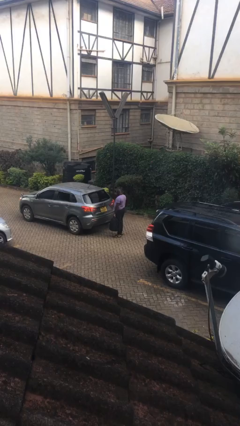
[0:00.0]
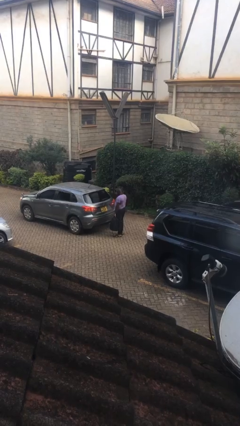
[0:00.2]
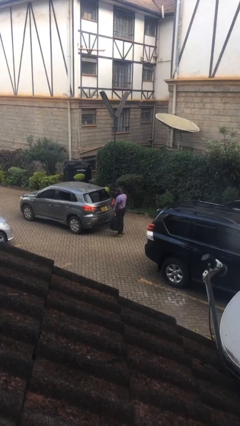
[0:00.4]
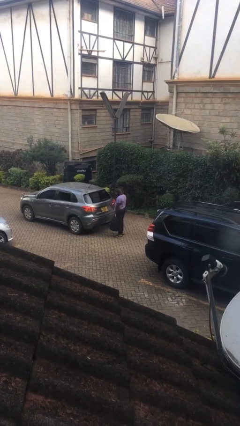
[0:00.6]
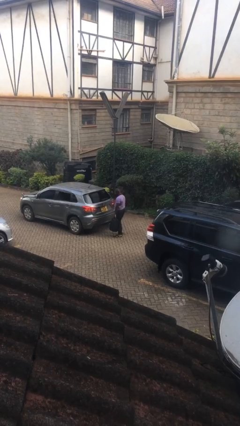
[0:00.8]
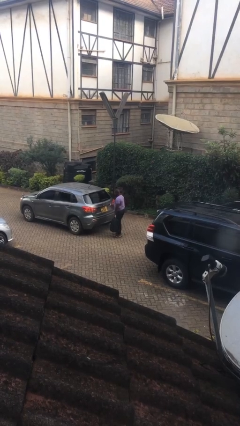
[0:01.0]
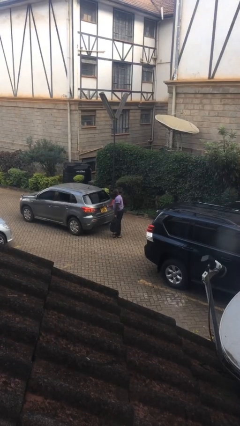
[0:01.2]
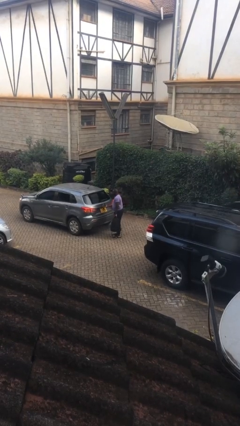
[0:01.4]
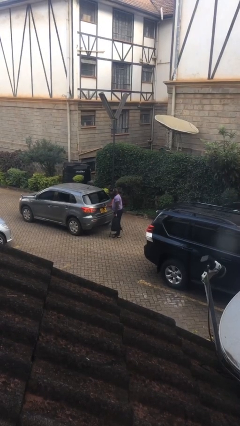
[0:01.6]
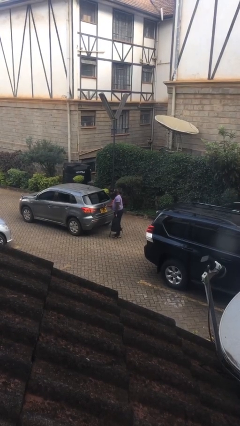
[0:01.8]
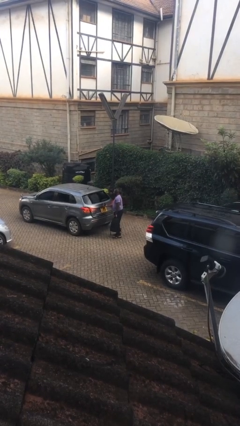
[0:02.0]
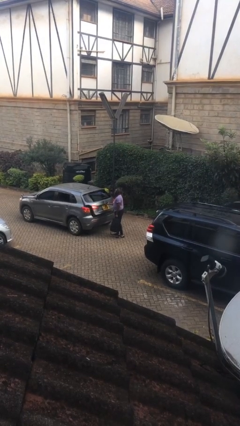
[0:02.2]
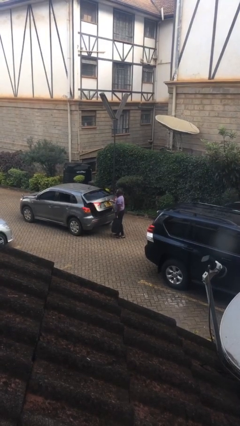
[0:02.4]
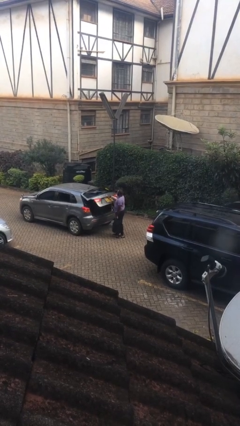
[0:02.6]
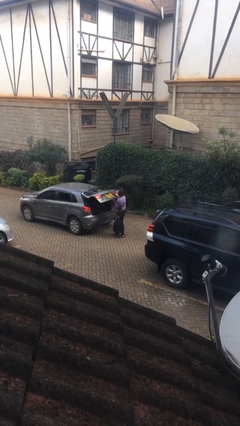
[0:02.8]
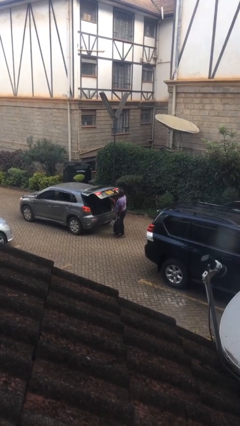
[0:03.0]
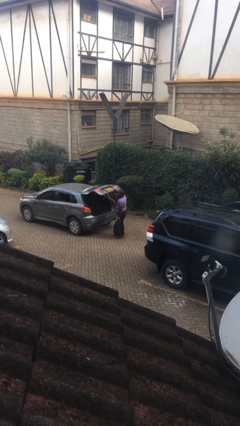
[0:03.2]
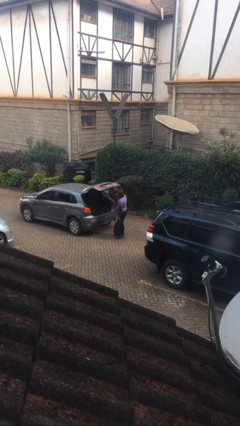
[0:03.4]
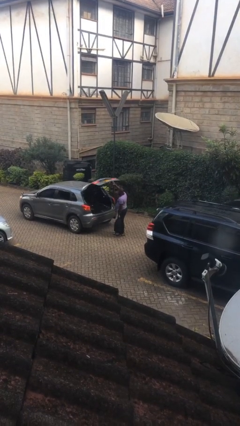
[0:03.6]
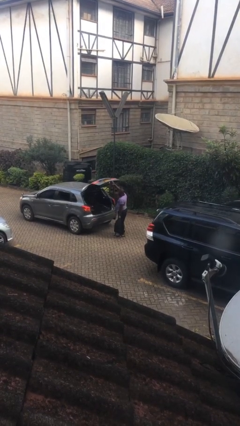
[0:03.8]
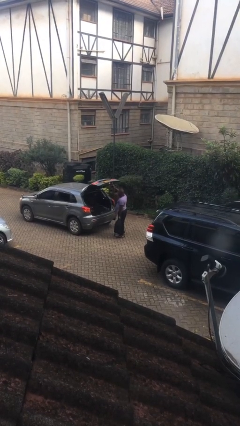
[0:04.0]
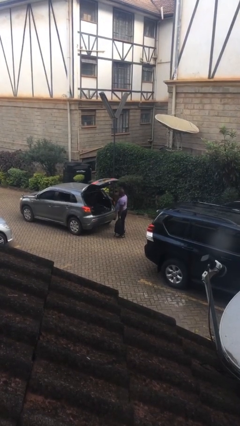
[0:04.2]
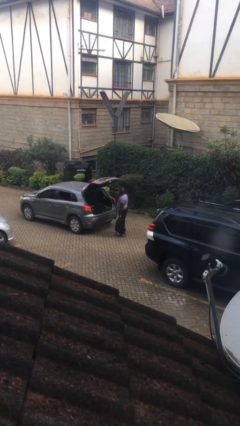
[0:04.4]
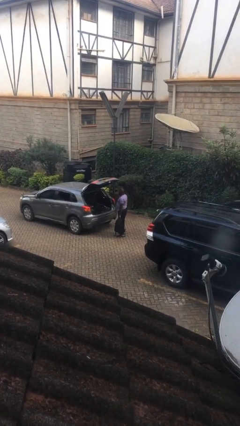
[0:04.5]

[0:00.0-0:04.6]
person opens car trunk

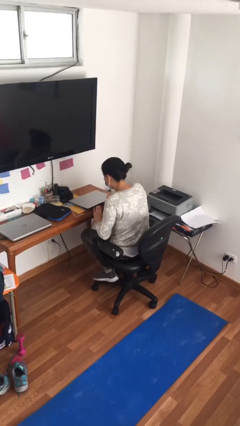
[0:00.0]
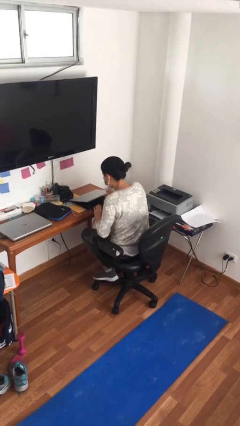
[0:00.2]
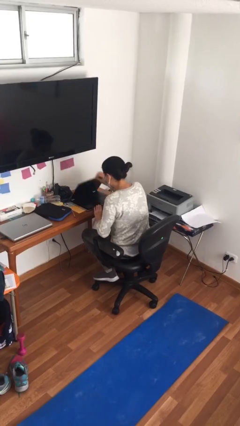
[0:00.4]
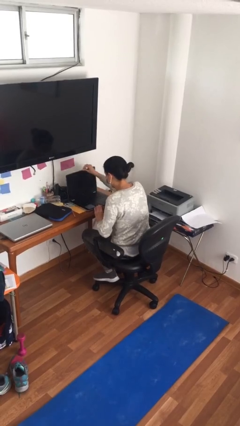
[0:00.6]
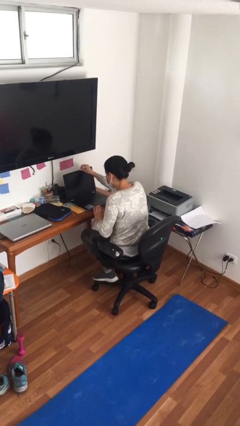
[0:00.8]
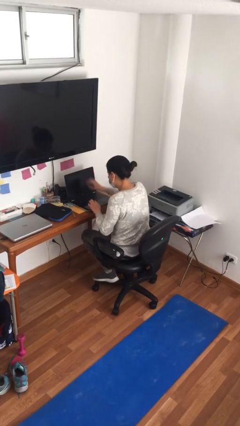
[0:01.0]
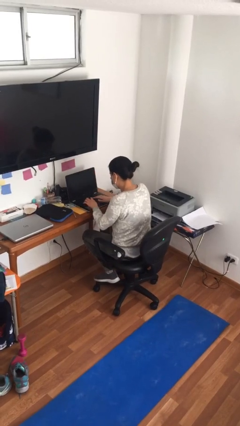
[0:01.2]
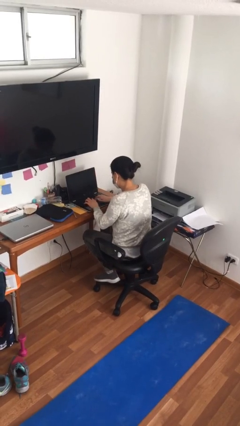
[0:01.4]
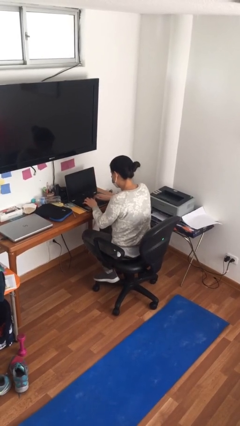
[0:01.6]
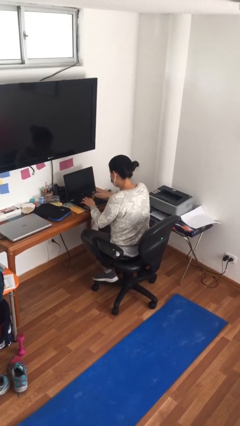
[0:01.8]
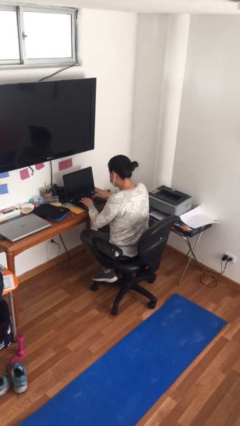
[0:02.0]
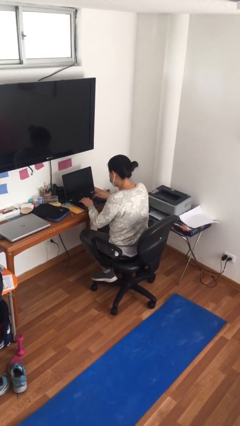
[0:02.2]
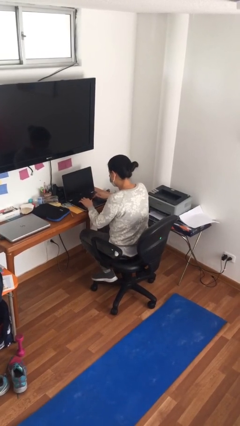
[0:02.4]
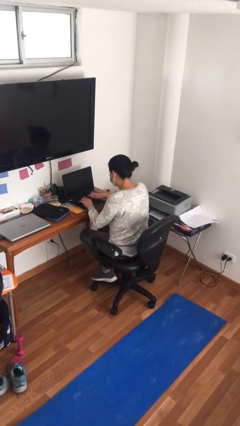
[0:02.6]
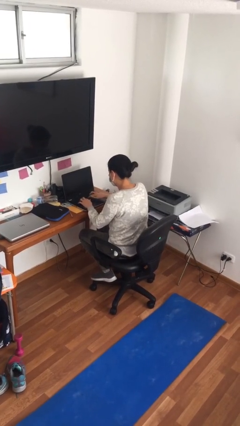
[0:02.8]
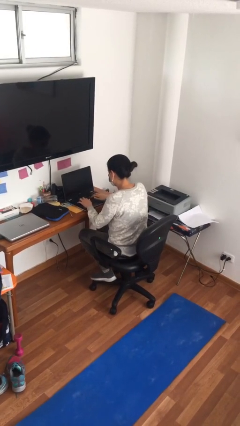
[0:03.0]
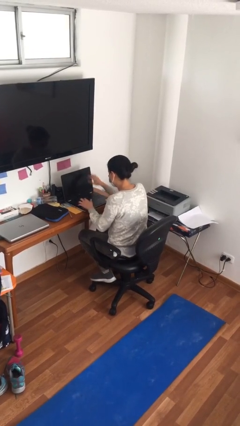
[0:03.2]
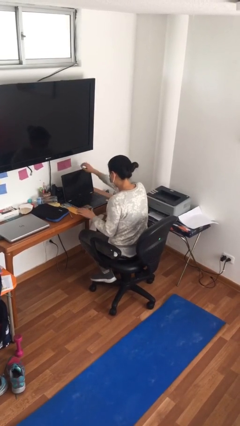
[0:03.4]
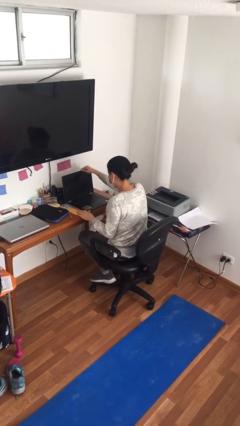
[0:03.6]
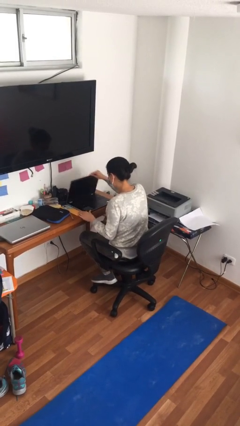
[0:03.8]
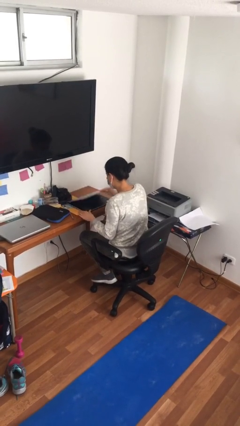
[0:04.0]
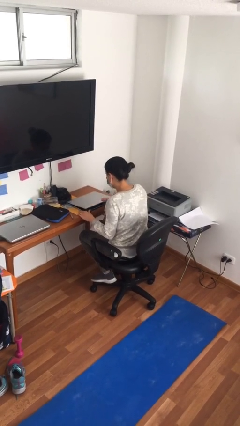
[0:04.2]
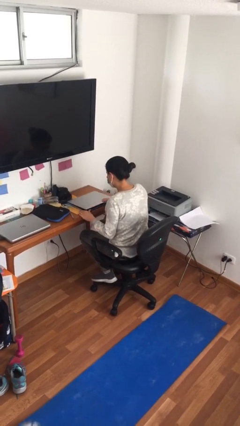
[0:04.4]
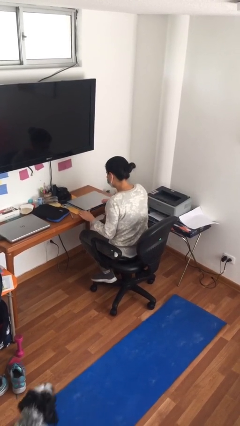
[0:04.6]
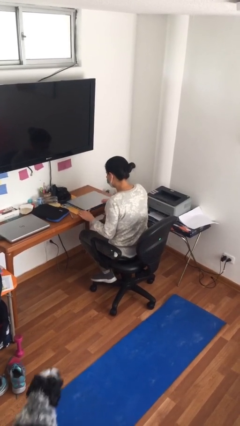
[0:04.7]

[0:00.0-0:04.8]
person interacts with laptop

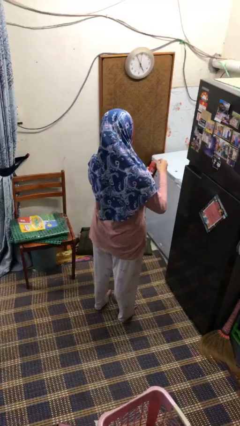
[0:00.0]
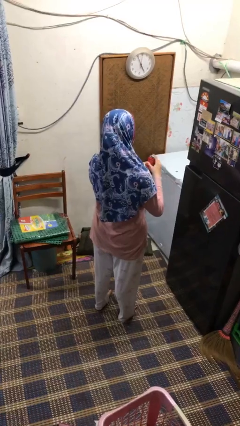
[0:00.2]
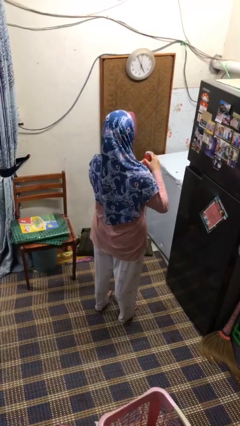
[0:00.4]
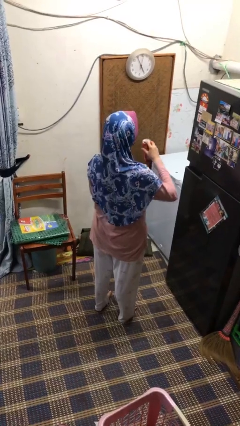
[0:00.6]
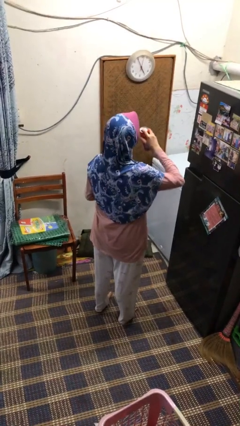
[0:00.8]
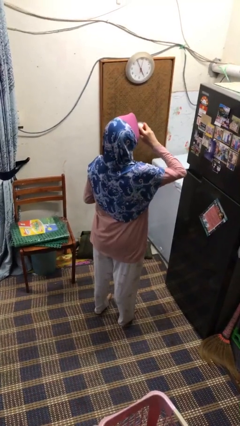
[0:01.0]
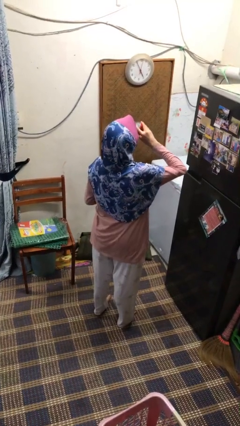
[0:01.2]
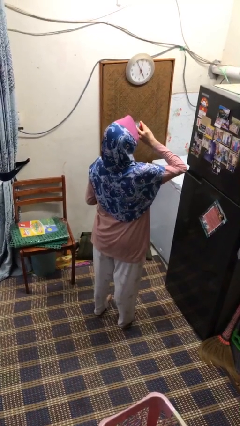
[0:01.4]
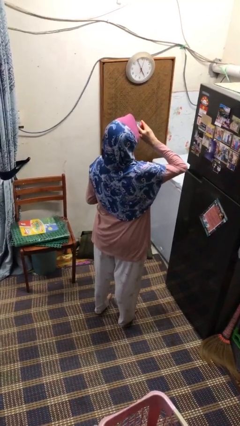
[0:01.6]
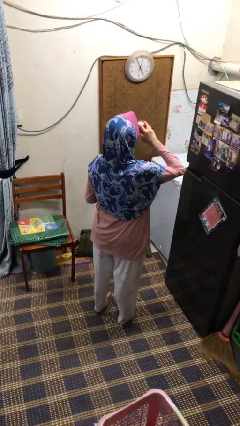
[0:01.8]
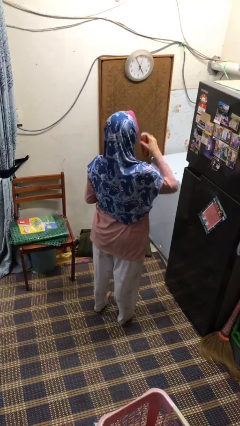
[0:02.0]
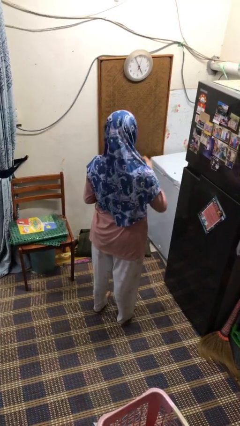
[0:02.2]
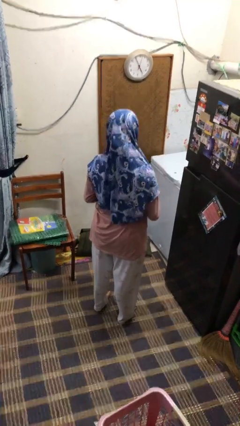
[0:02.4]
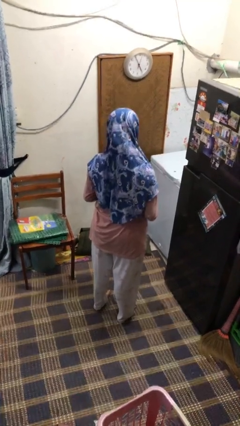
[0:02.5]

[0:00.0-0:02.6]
person drinks from beverage can

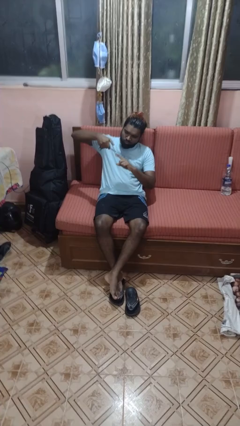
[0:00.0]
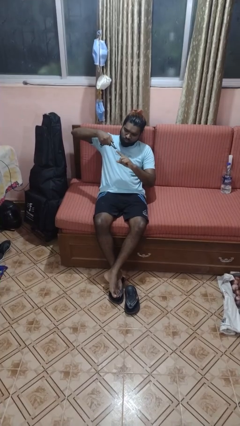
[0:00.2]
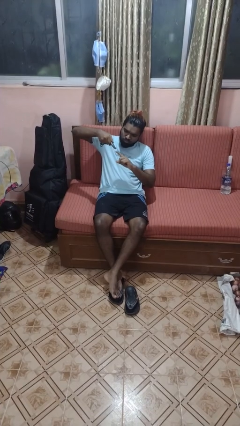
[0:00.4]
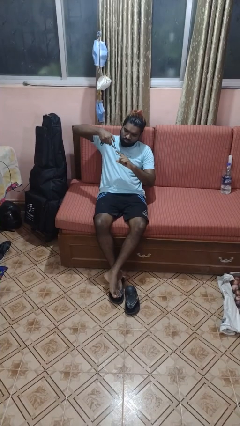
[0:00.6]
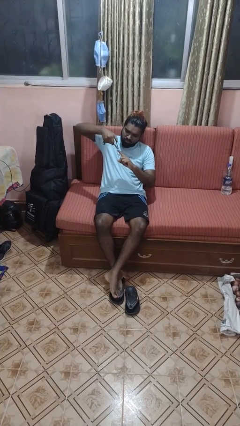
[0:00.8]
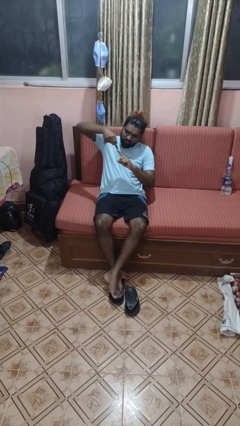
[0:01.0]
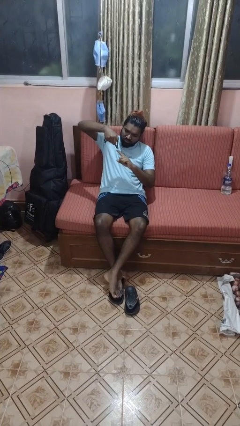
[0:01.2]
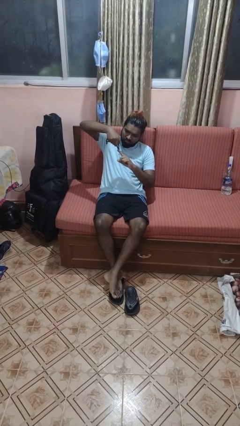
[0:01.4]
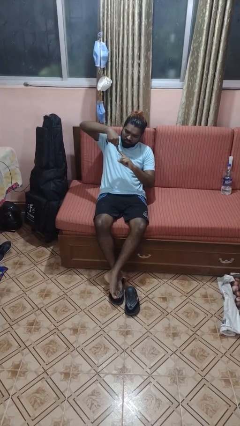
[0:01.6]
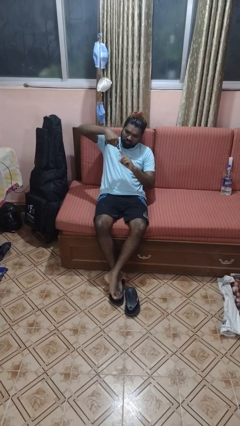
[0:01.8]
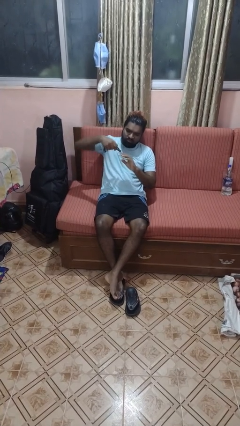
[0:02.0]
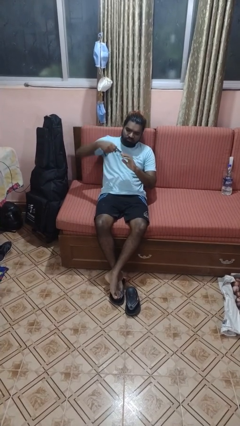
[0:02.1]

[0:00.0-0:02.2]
person clips fingernails

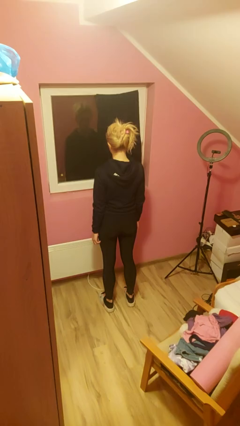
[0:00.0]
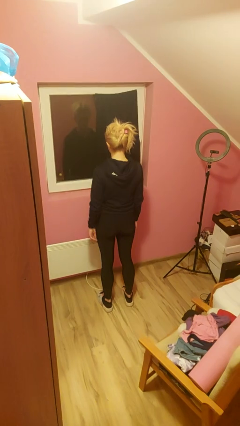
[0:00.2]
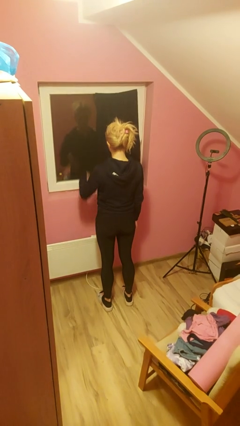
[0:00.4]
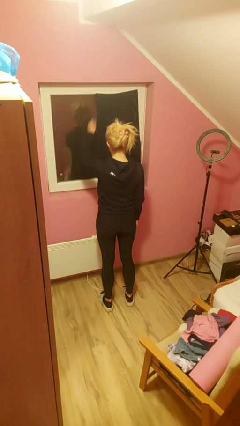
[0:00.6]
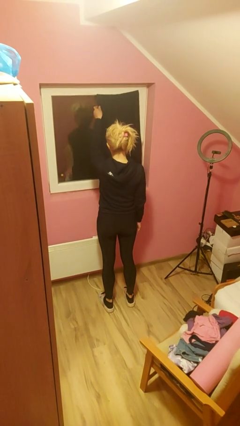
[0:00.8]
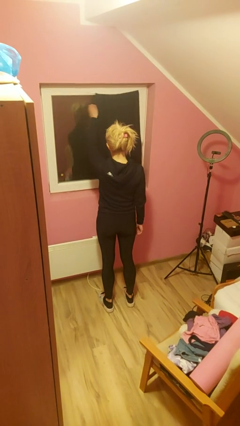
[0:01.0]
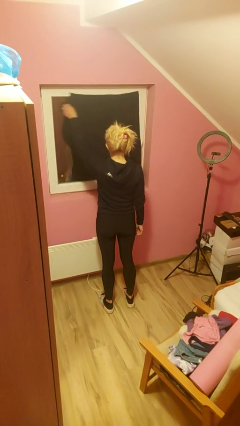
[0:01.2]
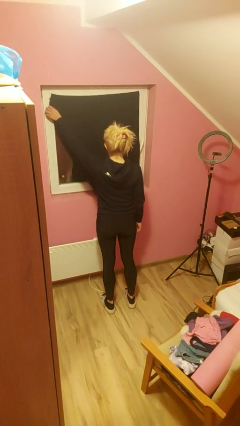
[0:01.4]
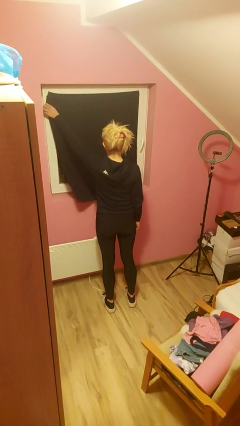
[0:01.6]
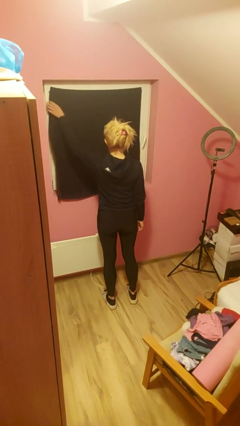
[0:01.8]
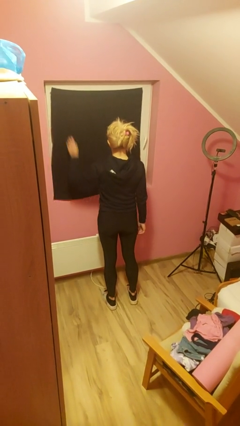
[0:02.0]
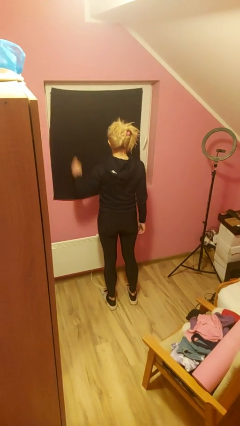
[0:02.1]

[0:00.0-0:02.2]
person closes curtains

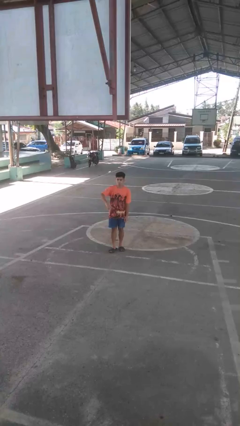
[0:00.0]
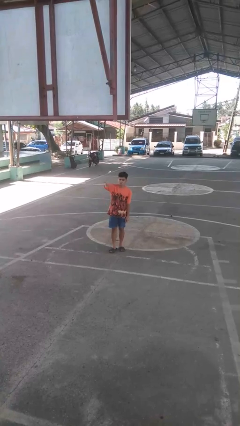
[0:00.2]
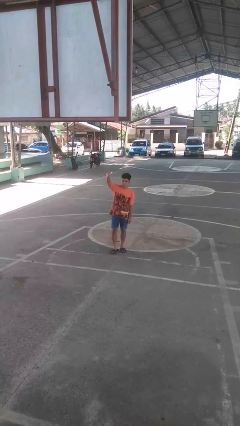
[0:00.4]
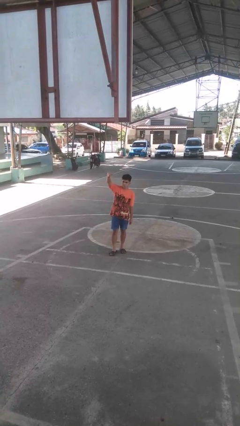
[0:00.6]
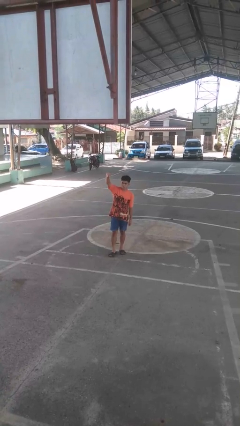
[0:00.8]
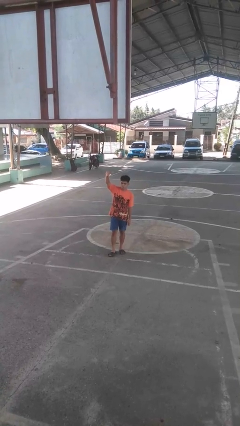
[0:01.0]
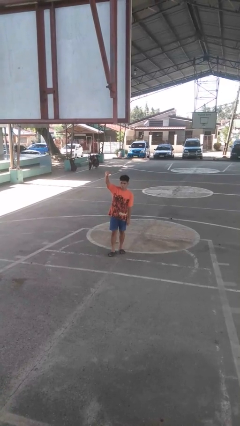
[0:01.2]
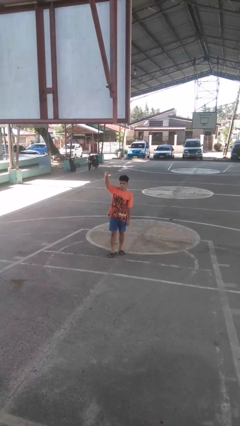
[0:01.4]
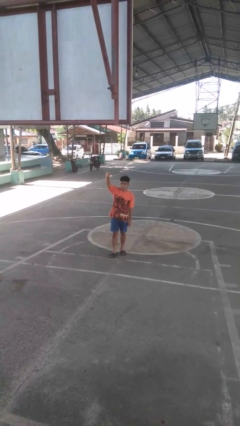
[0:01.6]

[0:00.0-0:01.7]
person gestures swipe up
